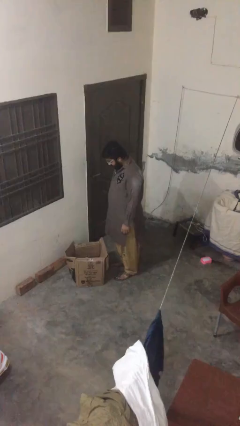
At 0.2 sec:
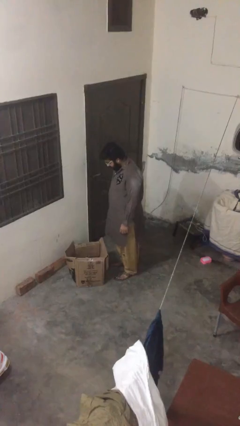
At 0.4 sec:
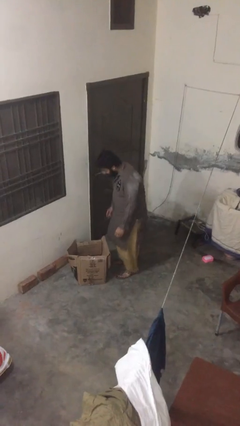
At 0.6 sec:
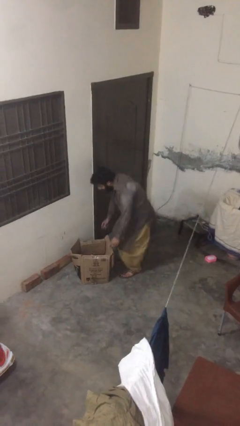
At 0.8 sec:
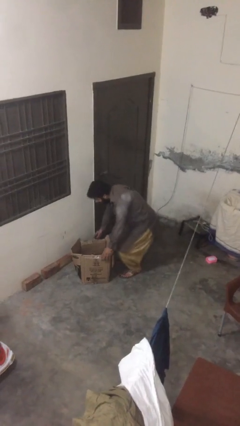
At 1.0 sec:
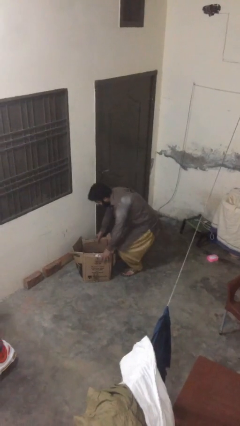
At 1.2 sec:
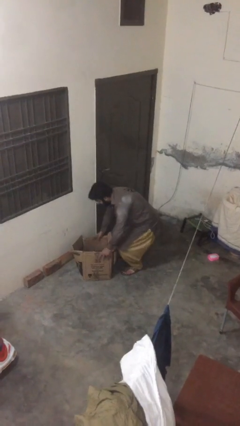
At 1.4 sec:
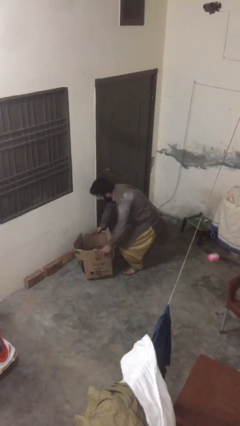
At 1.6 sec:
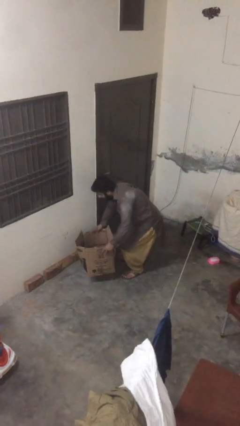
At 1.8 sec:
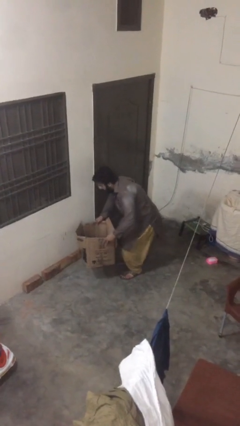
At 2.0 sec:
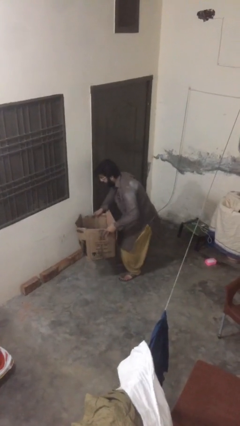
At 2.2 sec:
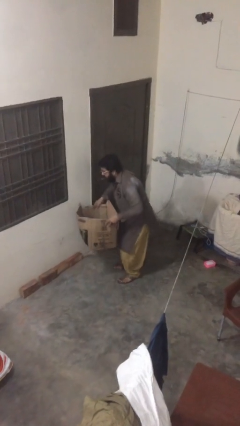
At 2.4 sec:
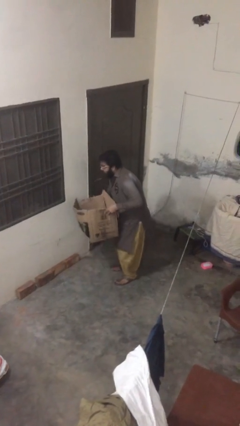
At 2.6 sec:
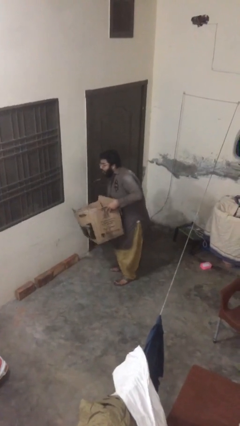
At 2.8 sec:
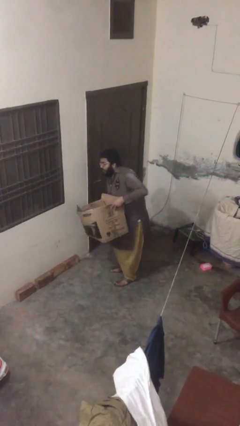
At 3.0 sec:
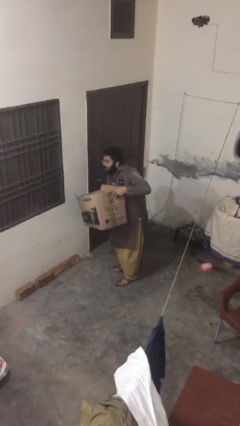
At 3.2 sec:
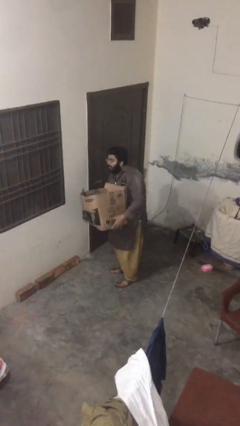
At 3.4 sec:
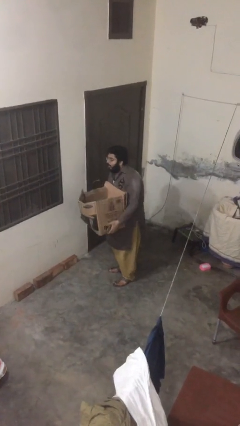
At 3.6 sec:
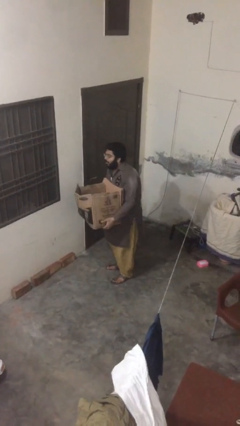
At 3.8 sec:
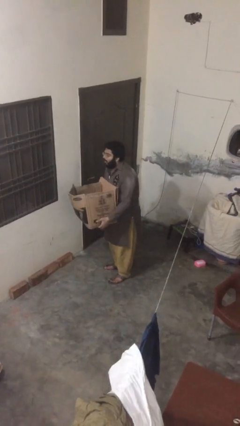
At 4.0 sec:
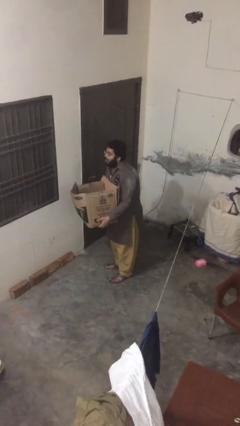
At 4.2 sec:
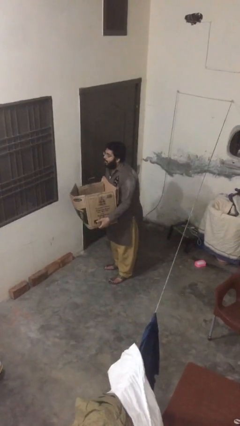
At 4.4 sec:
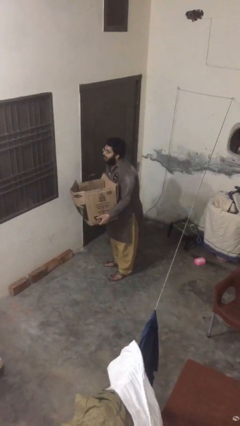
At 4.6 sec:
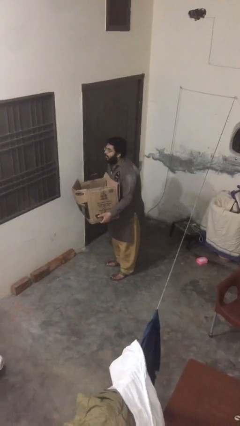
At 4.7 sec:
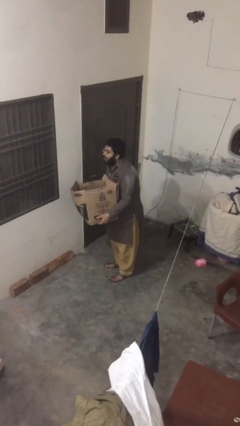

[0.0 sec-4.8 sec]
person picks up object from floor

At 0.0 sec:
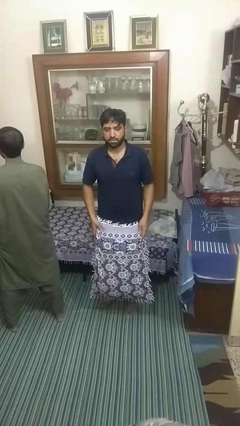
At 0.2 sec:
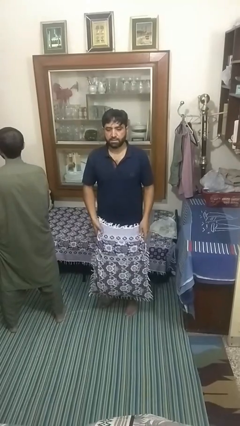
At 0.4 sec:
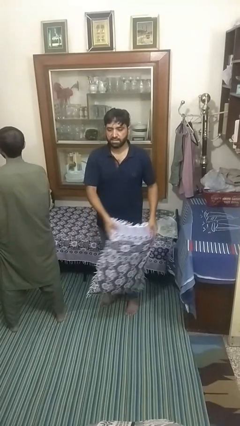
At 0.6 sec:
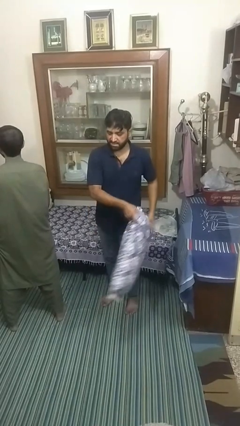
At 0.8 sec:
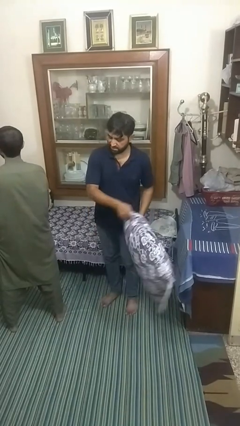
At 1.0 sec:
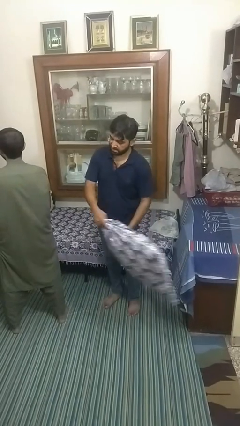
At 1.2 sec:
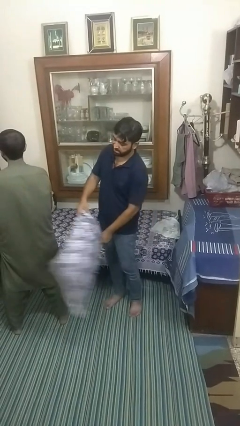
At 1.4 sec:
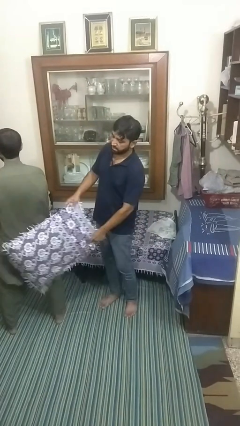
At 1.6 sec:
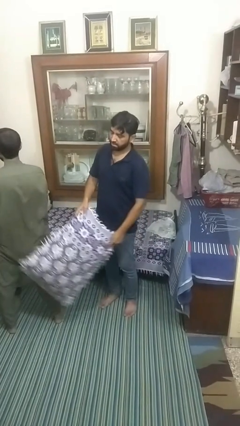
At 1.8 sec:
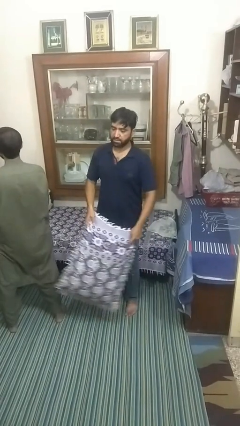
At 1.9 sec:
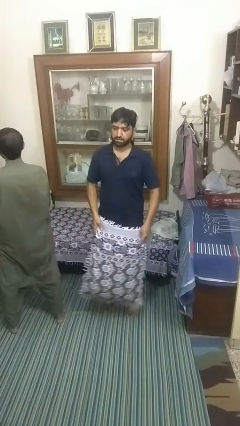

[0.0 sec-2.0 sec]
person hits person with pillow

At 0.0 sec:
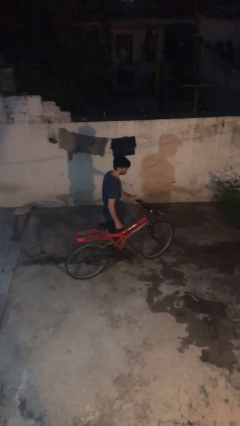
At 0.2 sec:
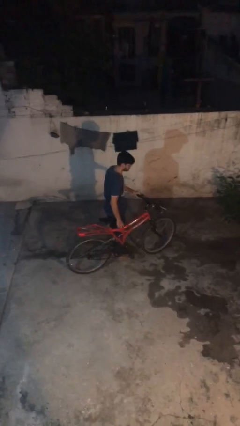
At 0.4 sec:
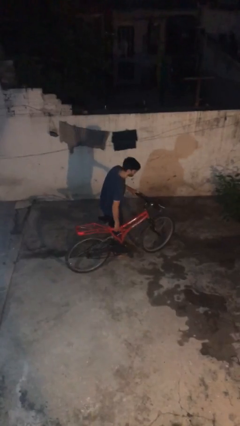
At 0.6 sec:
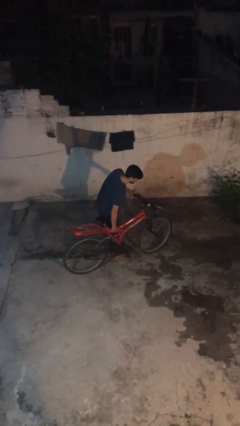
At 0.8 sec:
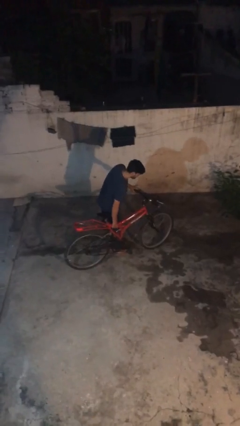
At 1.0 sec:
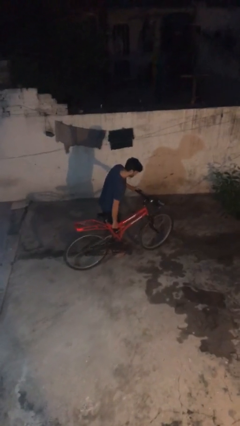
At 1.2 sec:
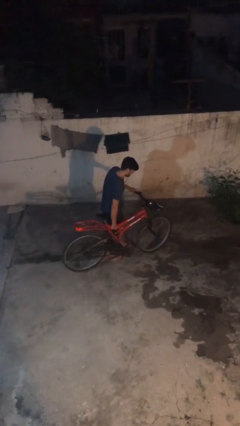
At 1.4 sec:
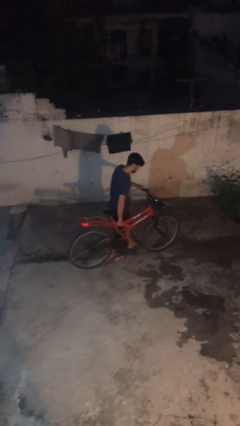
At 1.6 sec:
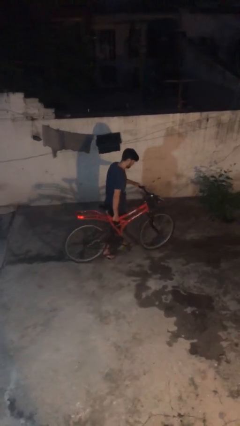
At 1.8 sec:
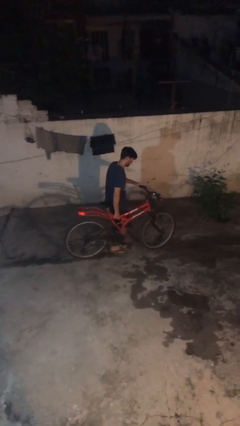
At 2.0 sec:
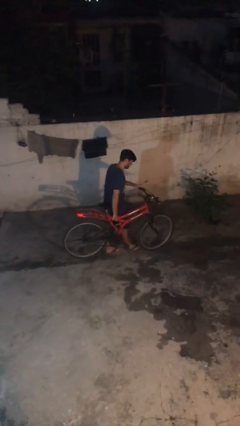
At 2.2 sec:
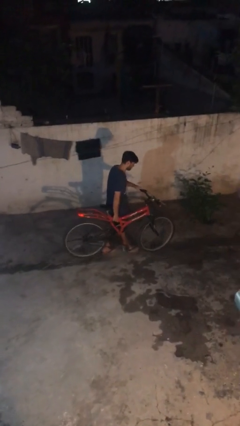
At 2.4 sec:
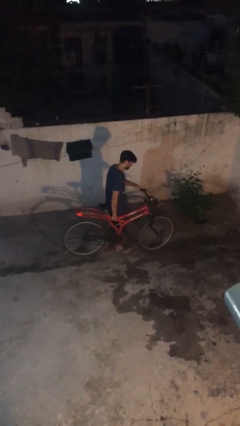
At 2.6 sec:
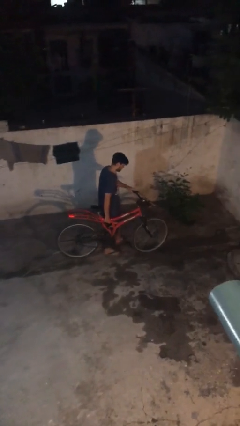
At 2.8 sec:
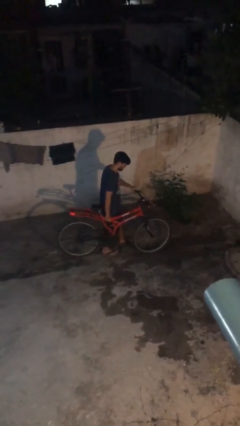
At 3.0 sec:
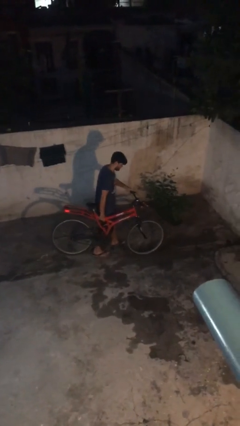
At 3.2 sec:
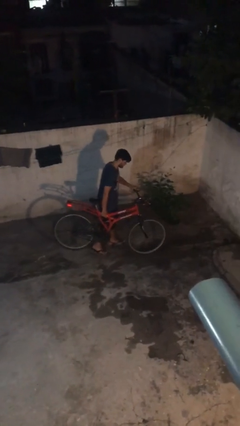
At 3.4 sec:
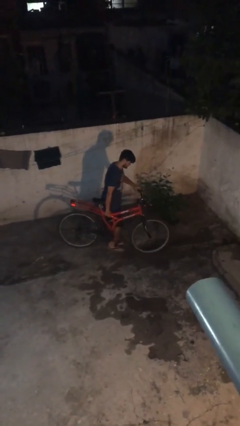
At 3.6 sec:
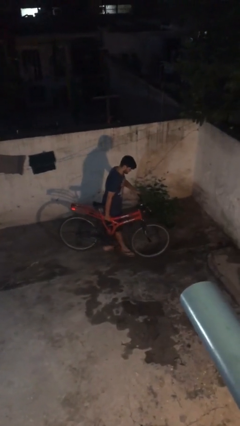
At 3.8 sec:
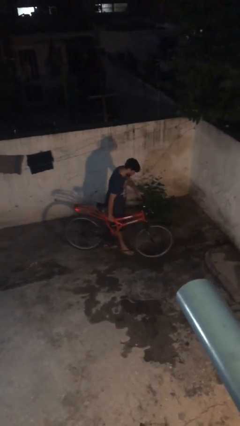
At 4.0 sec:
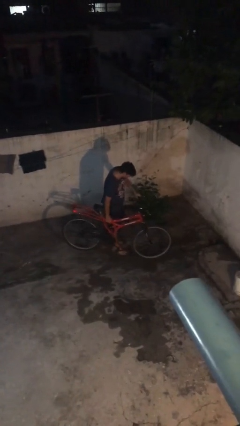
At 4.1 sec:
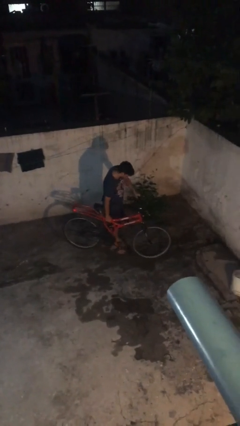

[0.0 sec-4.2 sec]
person carries bicycle

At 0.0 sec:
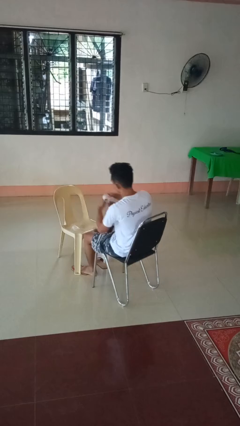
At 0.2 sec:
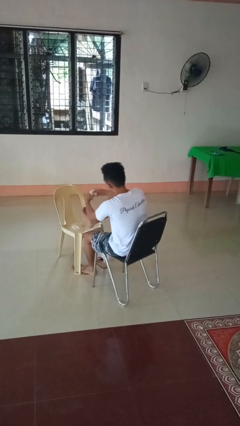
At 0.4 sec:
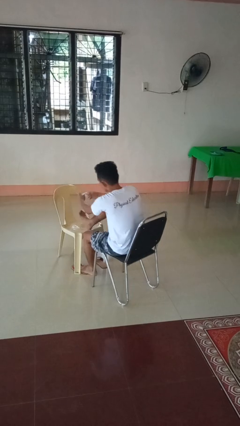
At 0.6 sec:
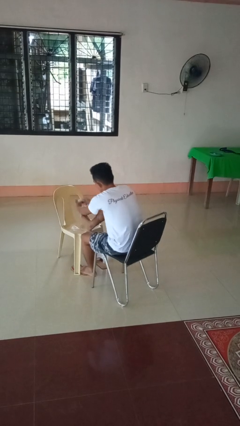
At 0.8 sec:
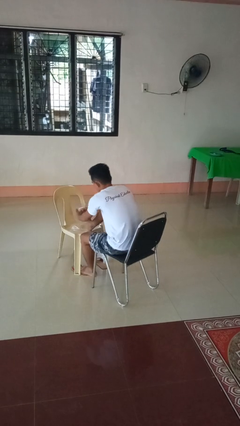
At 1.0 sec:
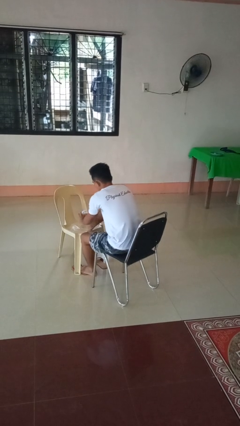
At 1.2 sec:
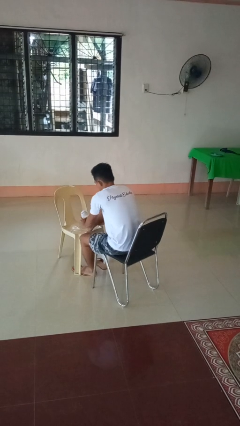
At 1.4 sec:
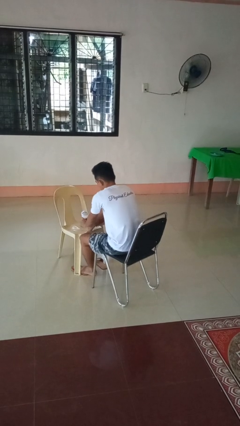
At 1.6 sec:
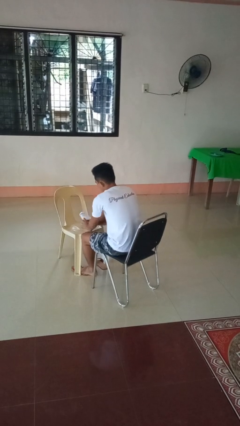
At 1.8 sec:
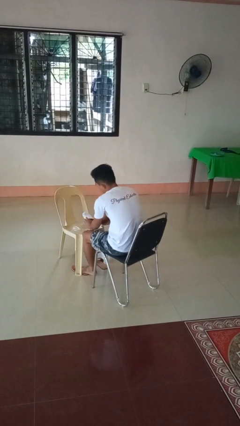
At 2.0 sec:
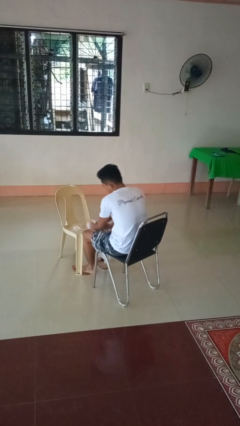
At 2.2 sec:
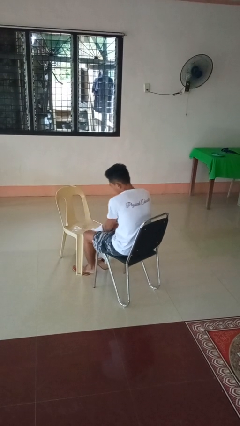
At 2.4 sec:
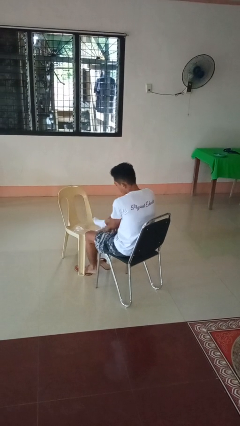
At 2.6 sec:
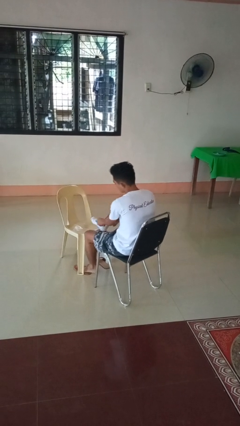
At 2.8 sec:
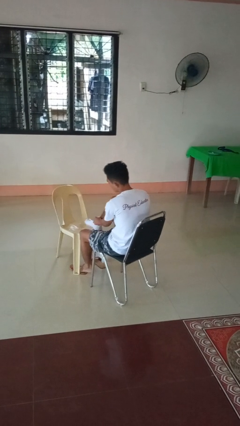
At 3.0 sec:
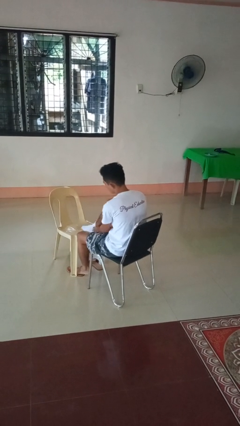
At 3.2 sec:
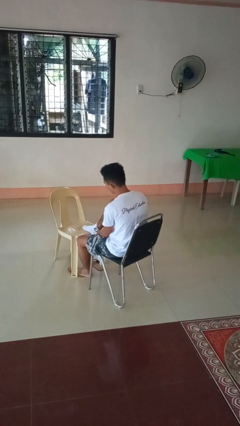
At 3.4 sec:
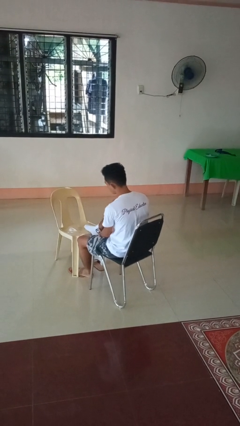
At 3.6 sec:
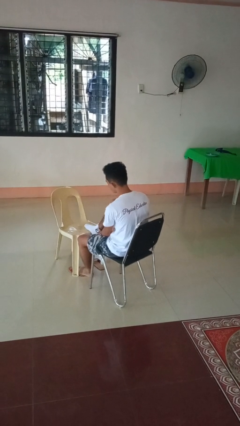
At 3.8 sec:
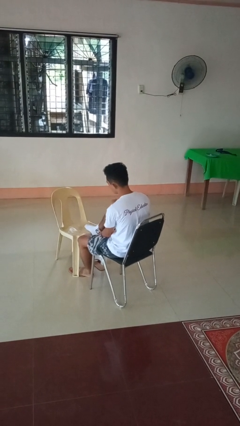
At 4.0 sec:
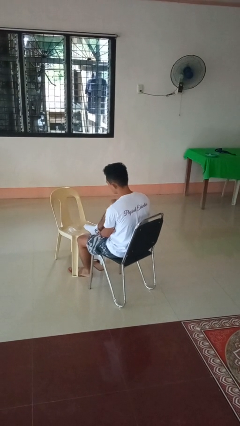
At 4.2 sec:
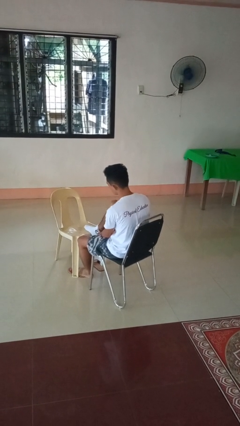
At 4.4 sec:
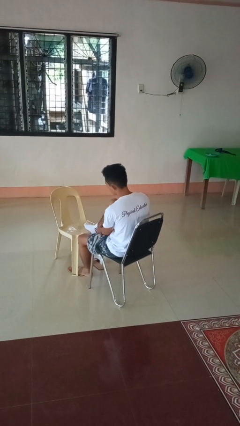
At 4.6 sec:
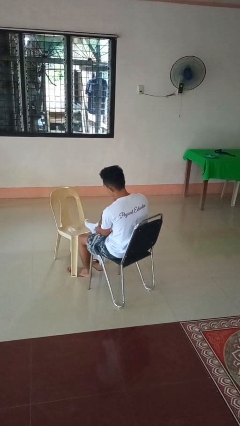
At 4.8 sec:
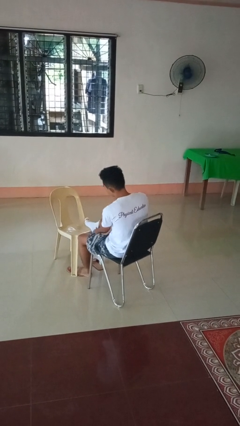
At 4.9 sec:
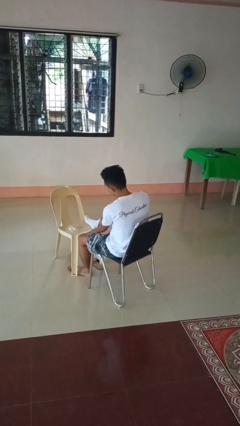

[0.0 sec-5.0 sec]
person puts on socks

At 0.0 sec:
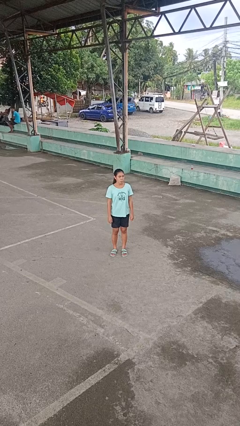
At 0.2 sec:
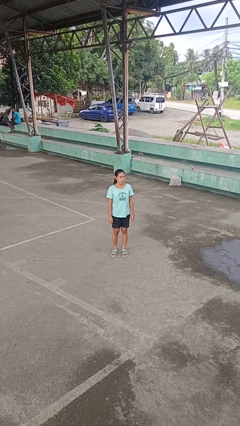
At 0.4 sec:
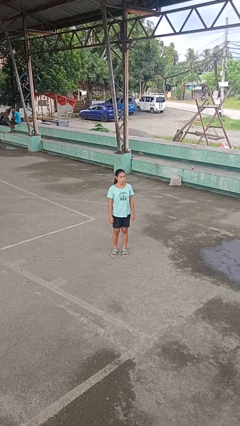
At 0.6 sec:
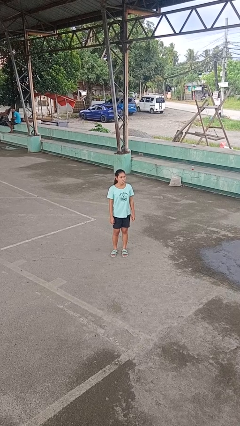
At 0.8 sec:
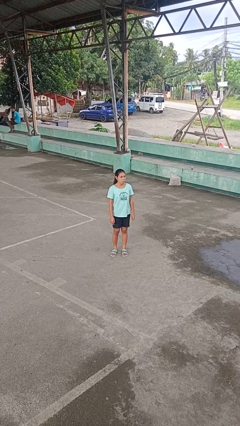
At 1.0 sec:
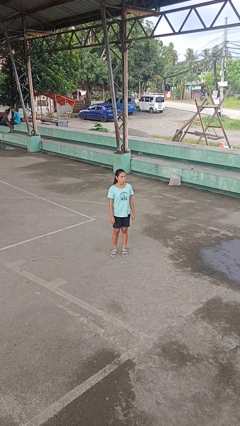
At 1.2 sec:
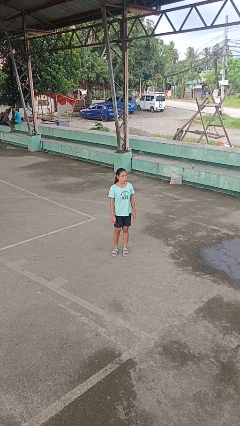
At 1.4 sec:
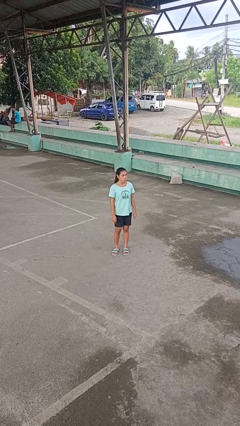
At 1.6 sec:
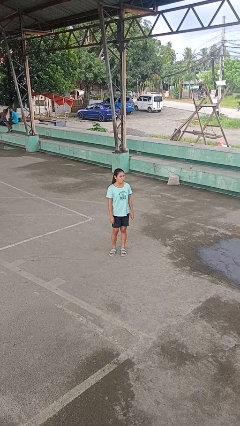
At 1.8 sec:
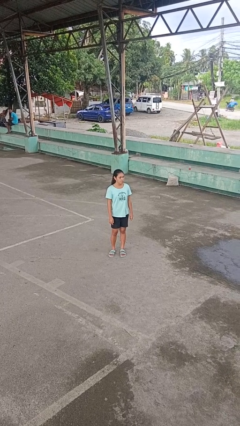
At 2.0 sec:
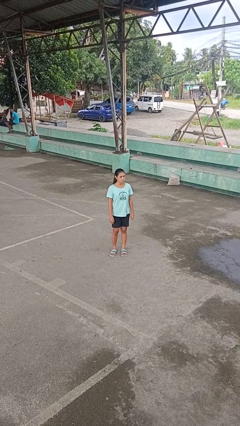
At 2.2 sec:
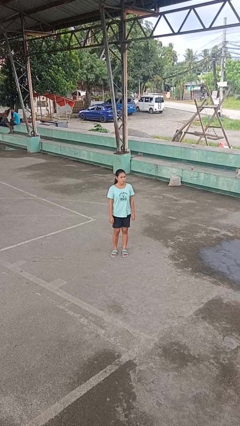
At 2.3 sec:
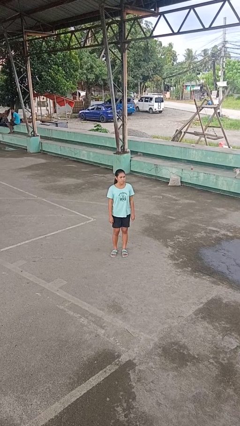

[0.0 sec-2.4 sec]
person sticks out tongue
